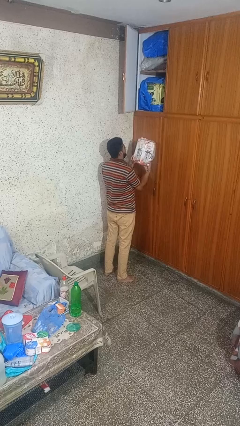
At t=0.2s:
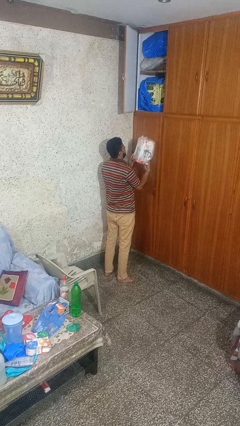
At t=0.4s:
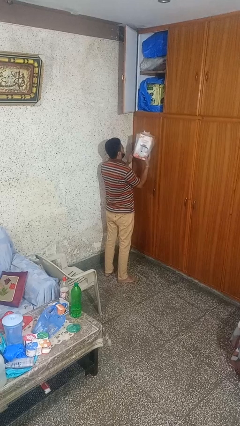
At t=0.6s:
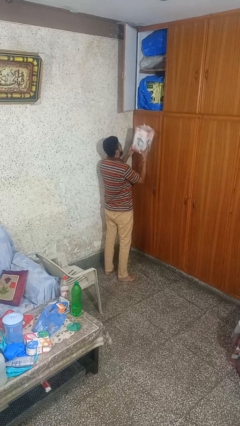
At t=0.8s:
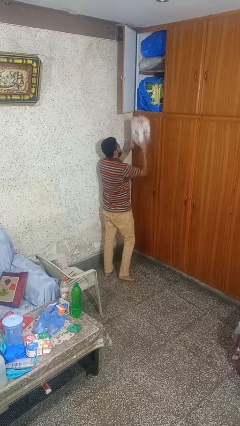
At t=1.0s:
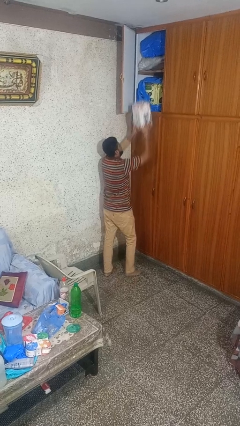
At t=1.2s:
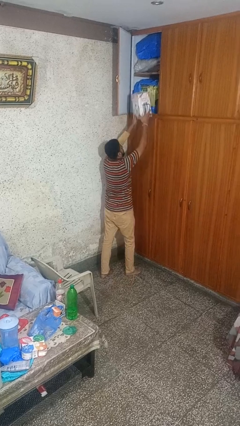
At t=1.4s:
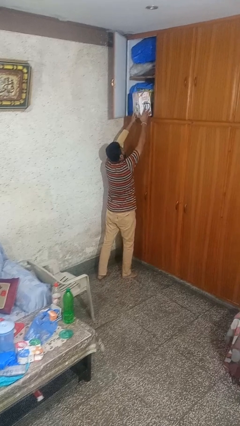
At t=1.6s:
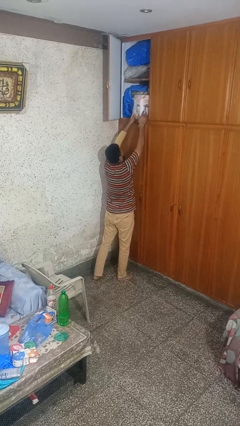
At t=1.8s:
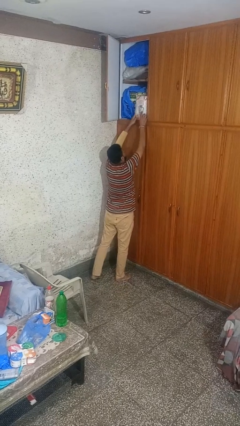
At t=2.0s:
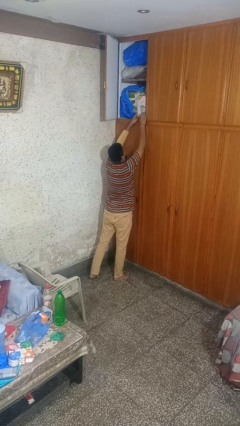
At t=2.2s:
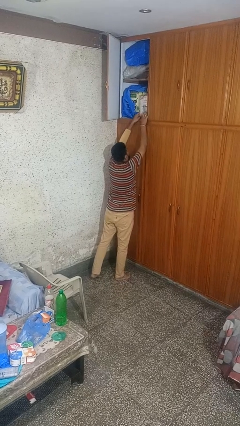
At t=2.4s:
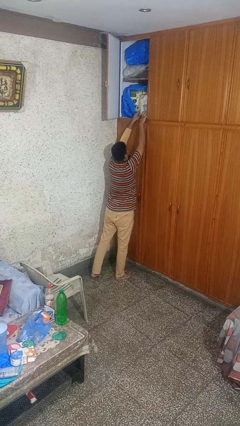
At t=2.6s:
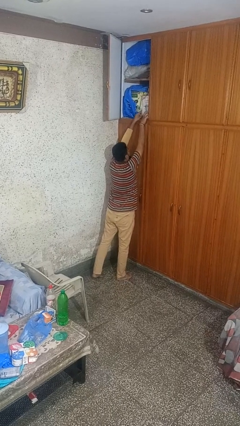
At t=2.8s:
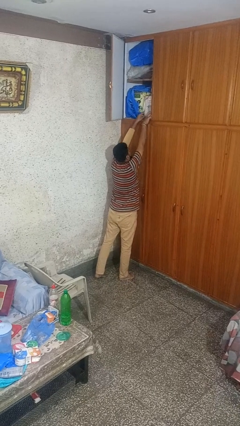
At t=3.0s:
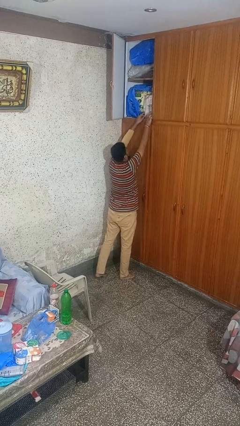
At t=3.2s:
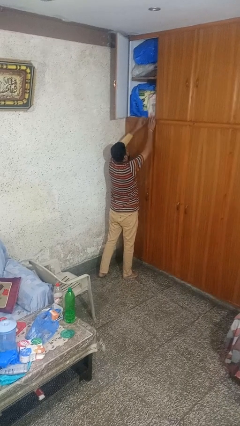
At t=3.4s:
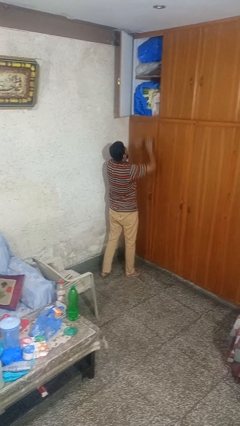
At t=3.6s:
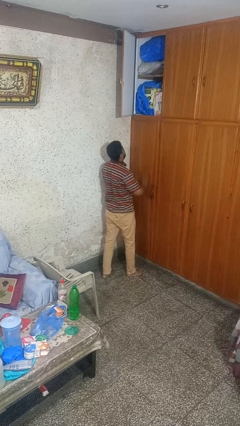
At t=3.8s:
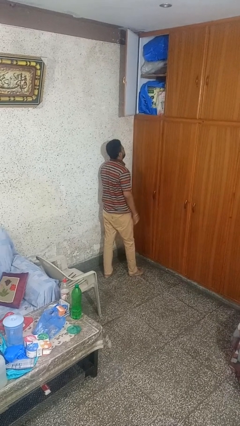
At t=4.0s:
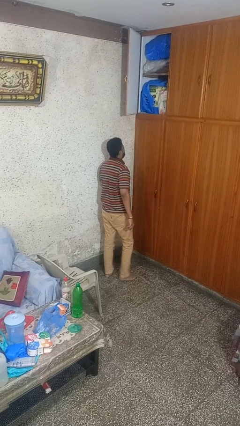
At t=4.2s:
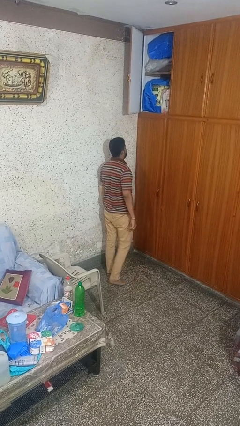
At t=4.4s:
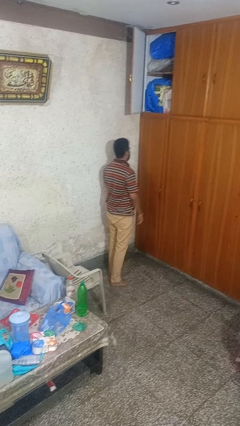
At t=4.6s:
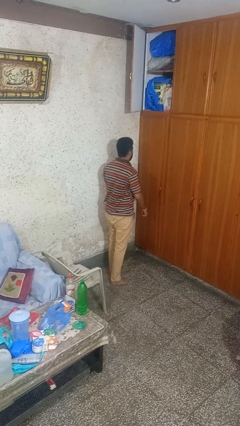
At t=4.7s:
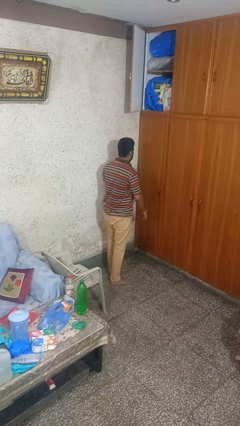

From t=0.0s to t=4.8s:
person puts down object on countertop

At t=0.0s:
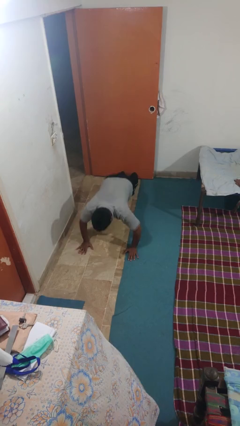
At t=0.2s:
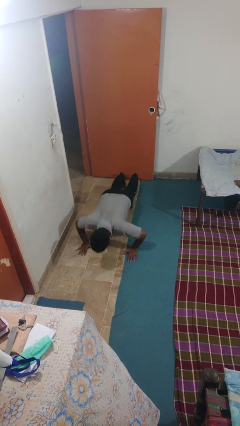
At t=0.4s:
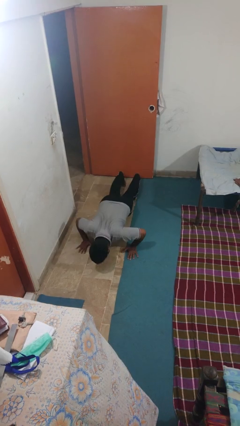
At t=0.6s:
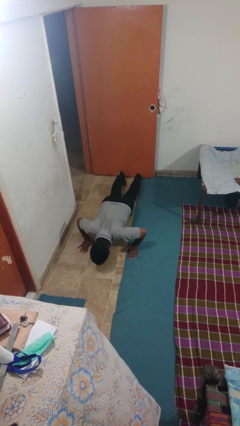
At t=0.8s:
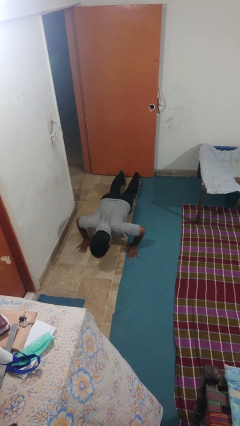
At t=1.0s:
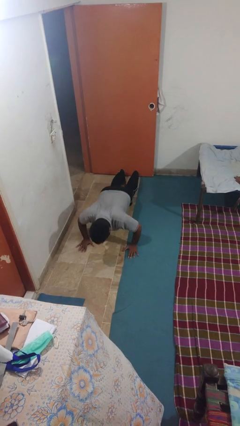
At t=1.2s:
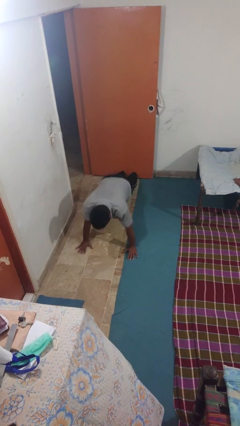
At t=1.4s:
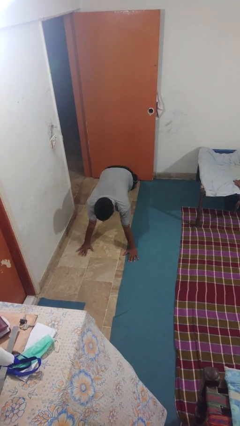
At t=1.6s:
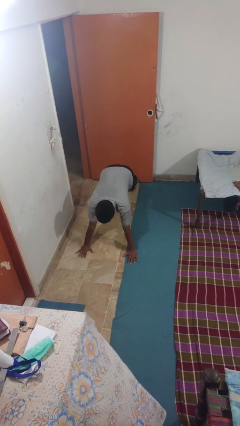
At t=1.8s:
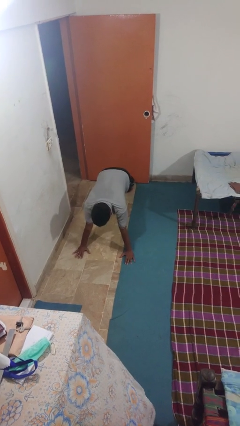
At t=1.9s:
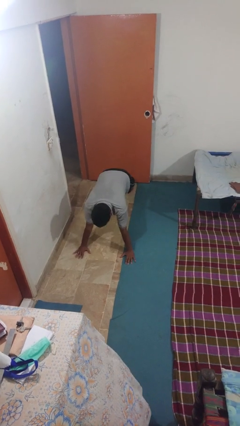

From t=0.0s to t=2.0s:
person exercises with pushup

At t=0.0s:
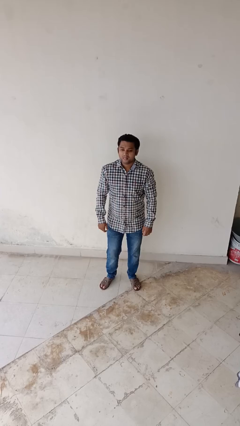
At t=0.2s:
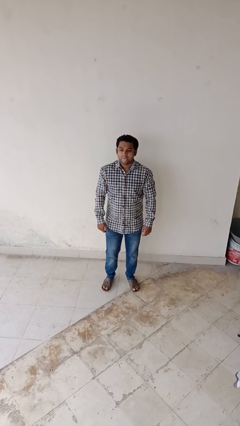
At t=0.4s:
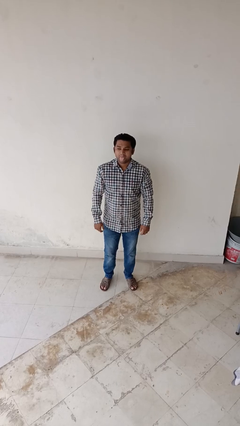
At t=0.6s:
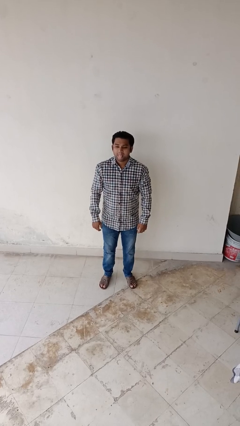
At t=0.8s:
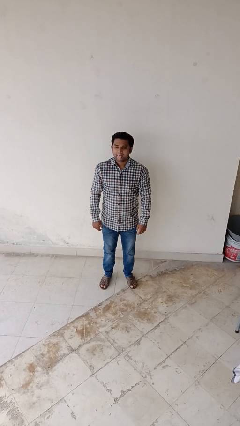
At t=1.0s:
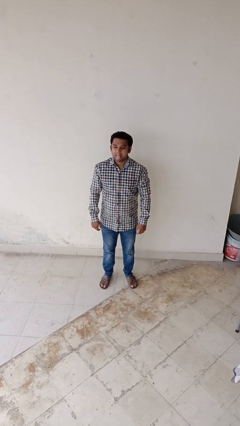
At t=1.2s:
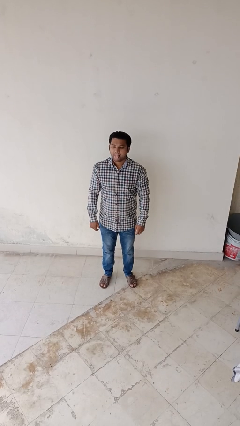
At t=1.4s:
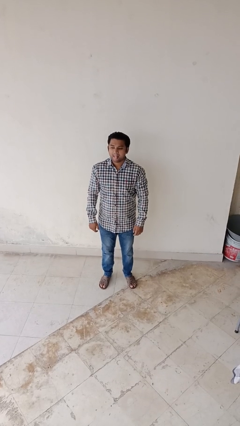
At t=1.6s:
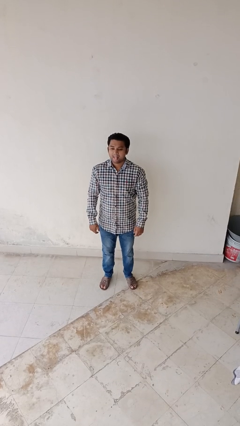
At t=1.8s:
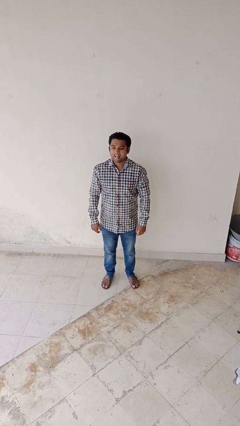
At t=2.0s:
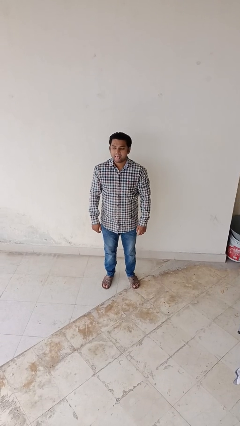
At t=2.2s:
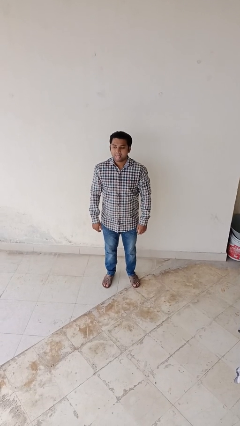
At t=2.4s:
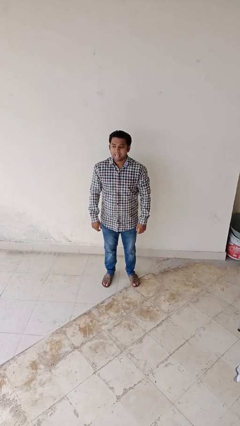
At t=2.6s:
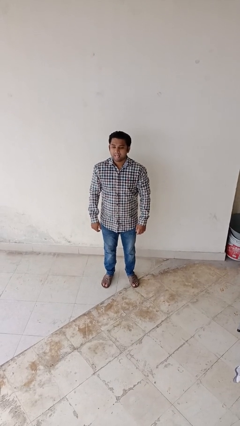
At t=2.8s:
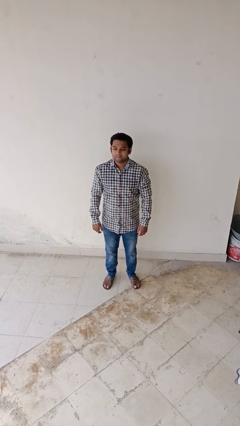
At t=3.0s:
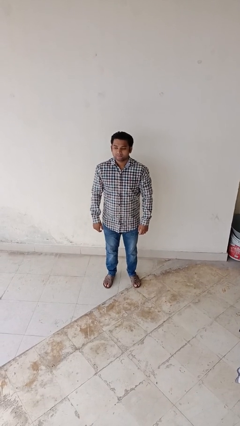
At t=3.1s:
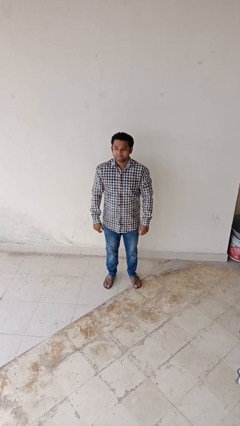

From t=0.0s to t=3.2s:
person sticks out tongue

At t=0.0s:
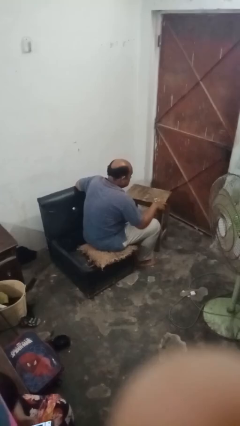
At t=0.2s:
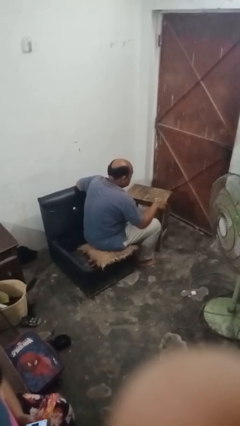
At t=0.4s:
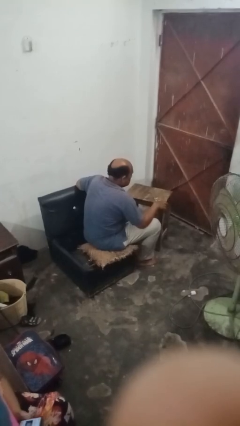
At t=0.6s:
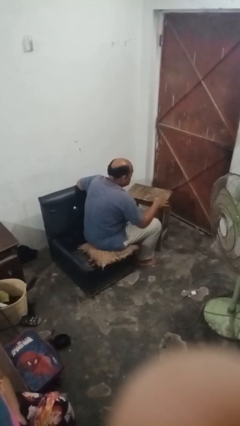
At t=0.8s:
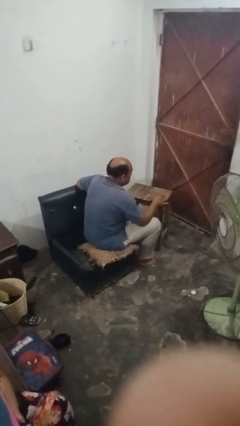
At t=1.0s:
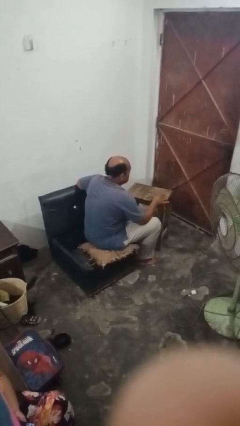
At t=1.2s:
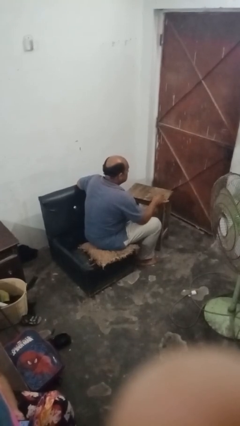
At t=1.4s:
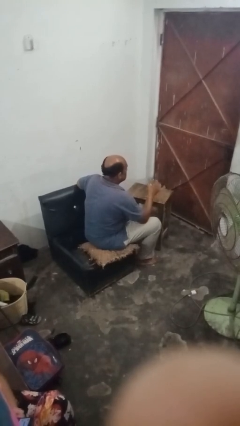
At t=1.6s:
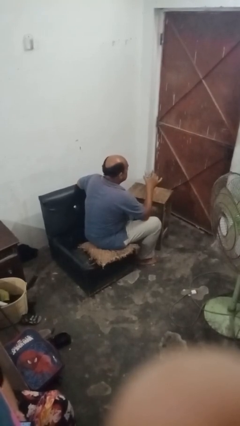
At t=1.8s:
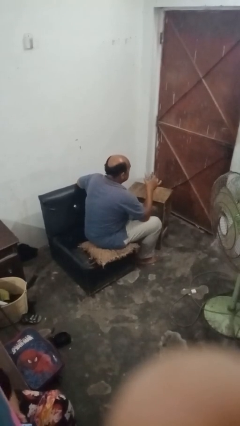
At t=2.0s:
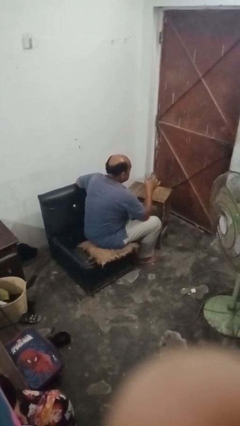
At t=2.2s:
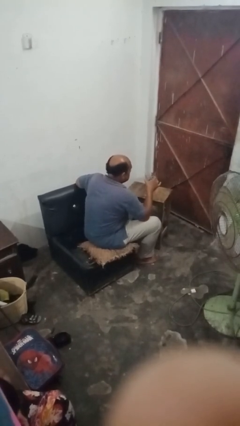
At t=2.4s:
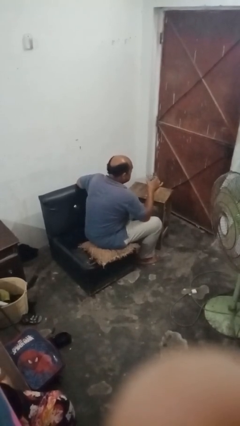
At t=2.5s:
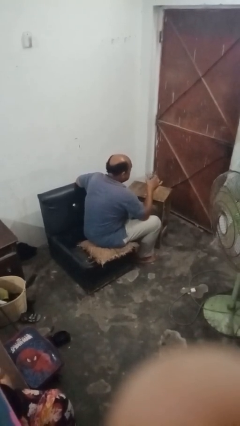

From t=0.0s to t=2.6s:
person picks up object from table

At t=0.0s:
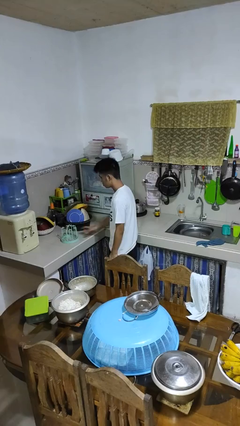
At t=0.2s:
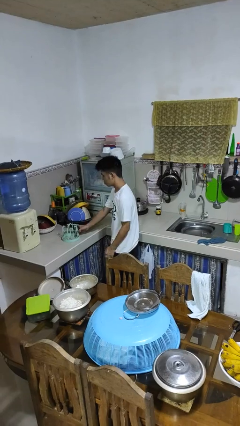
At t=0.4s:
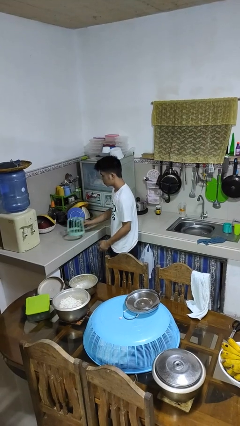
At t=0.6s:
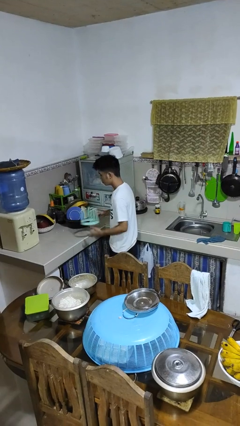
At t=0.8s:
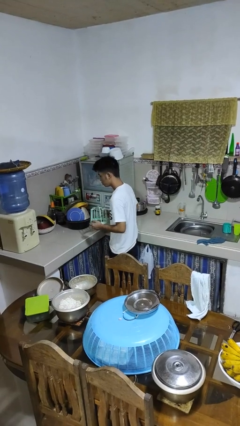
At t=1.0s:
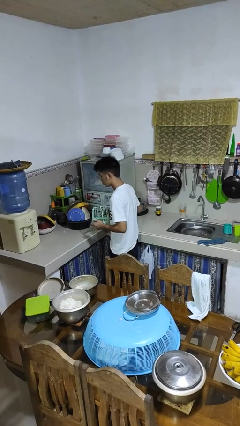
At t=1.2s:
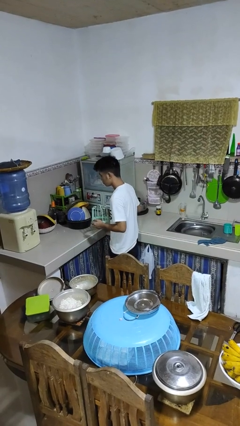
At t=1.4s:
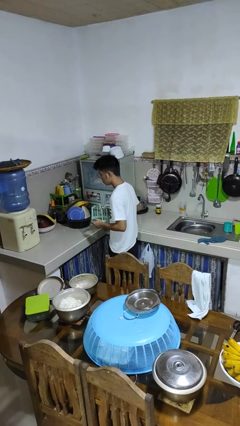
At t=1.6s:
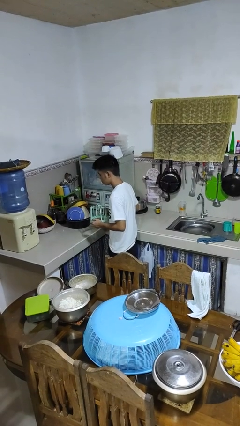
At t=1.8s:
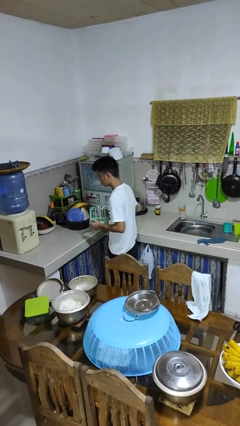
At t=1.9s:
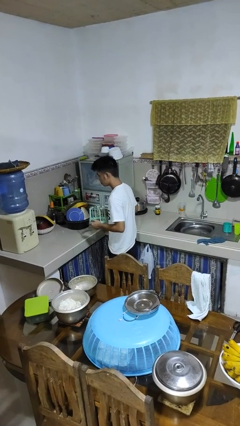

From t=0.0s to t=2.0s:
person picks up object from countertop

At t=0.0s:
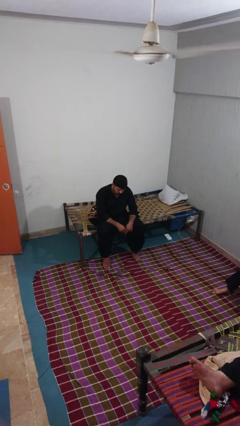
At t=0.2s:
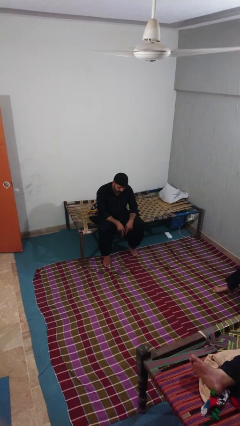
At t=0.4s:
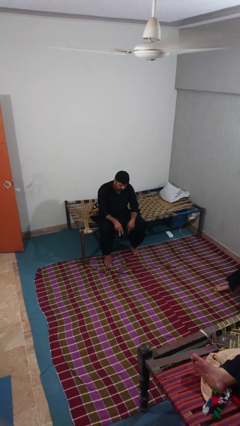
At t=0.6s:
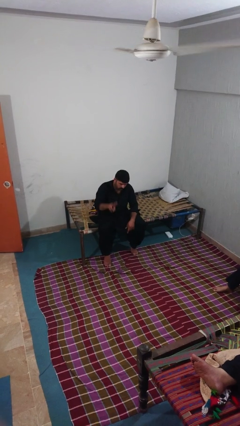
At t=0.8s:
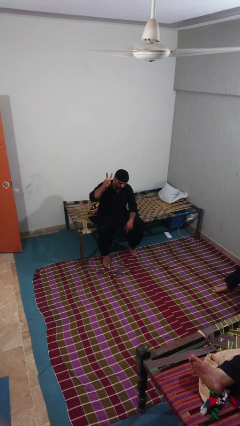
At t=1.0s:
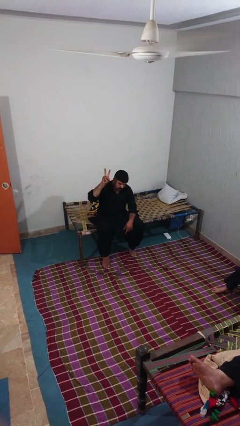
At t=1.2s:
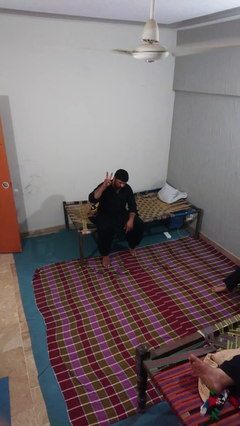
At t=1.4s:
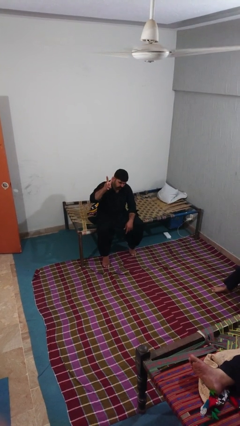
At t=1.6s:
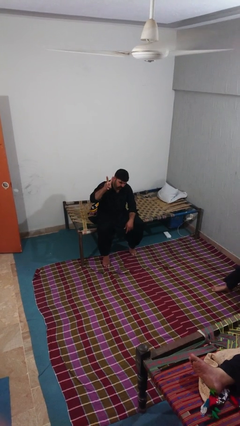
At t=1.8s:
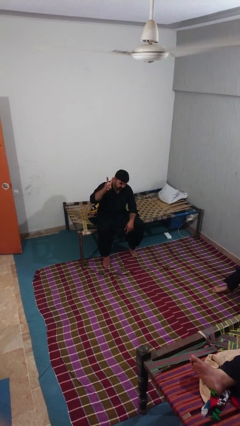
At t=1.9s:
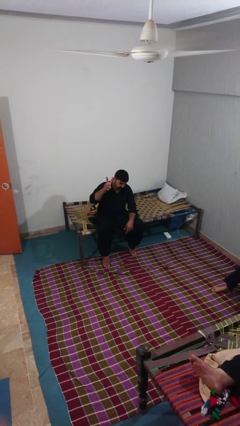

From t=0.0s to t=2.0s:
person gestures peace

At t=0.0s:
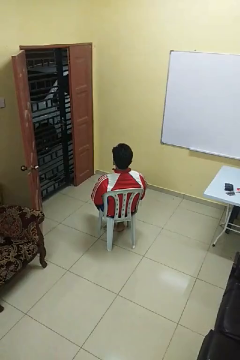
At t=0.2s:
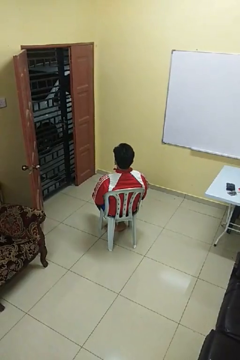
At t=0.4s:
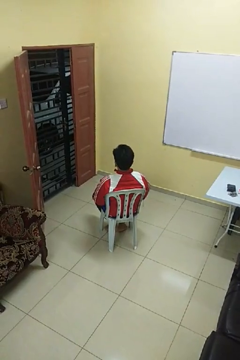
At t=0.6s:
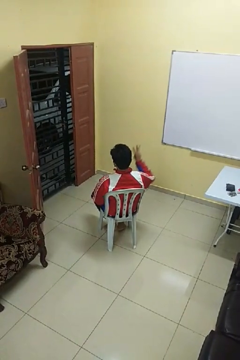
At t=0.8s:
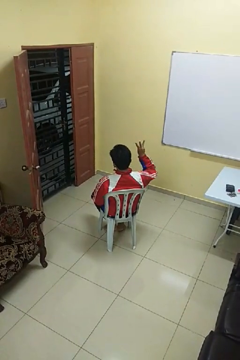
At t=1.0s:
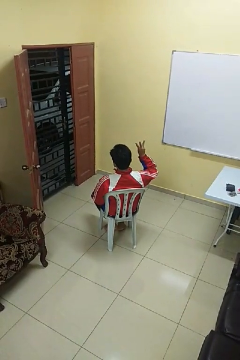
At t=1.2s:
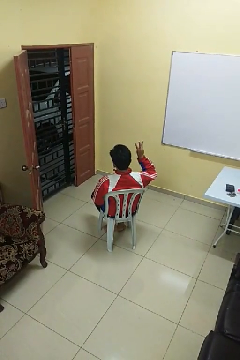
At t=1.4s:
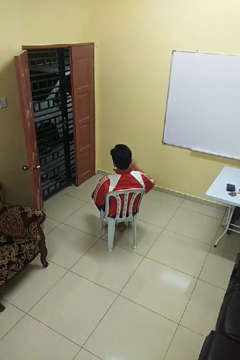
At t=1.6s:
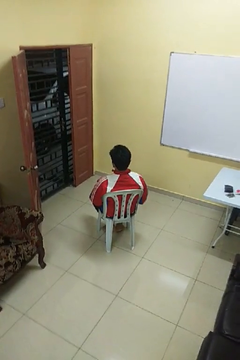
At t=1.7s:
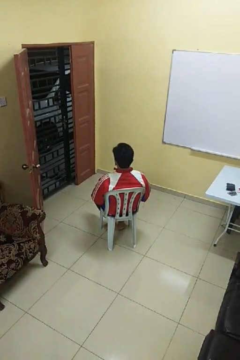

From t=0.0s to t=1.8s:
person gestures number three
